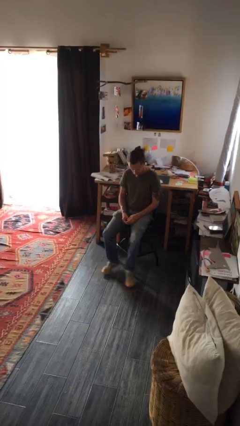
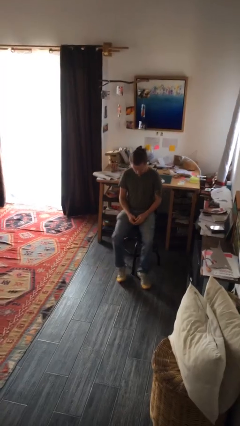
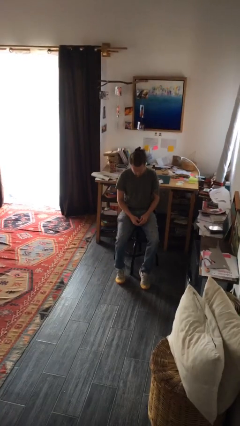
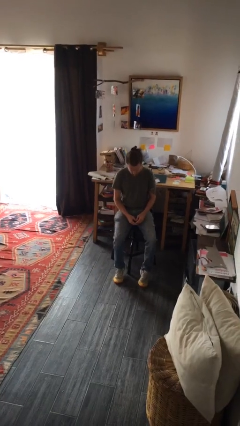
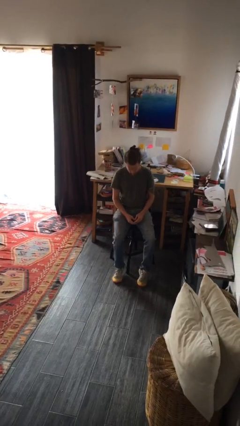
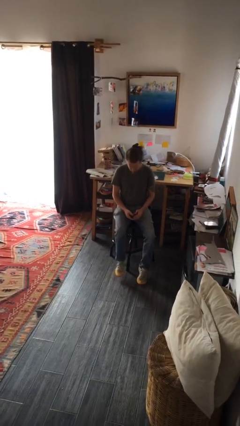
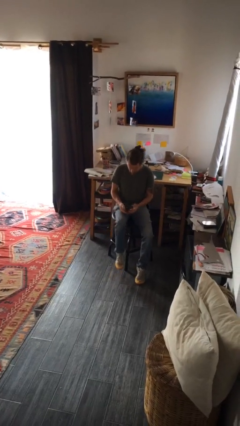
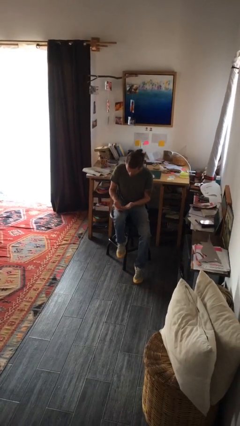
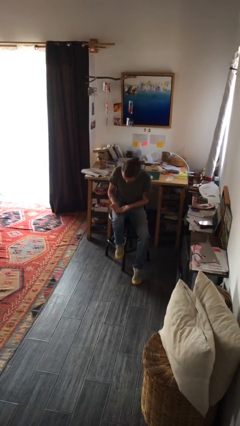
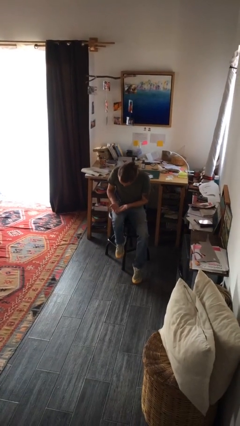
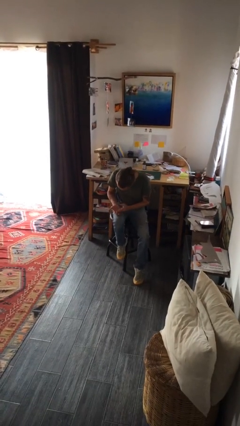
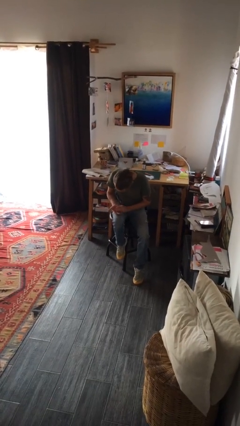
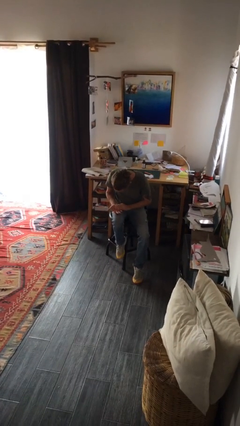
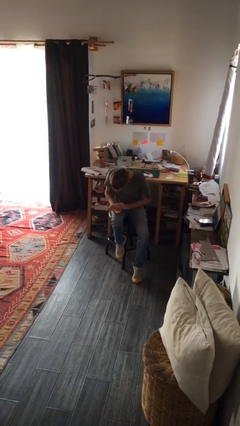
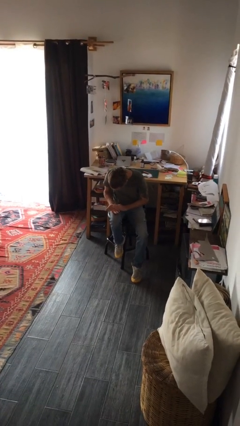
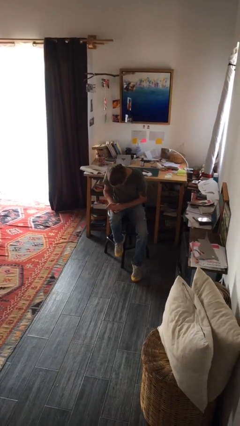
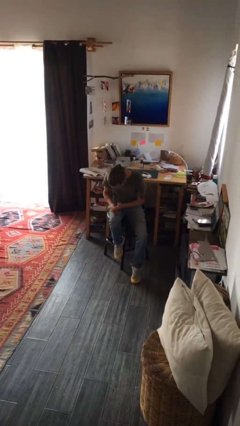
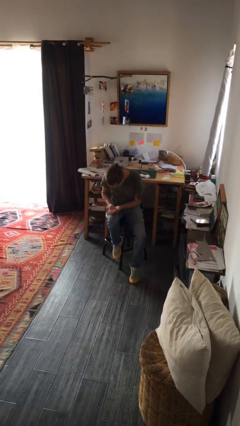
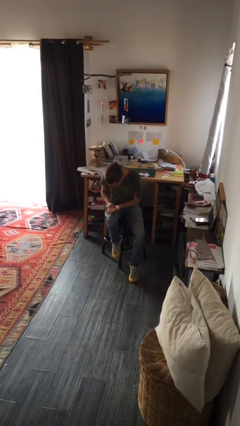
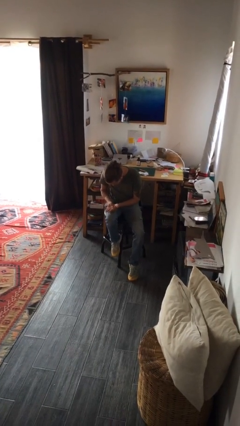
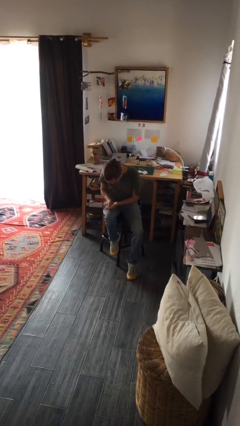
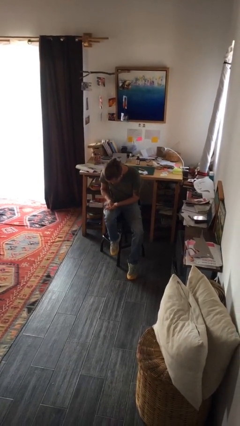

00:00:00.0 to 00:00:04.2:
person looks at hands in lap

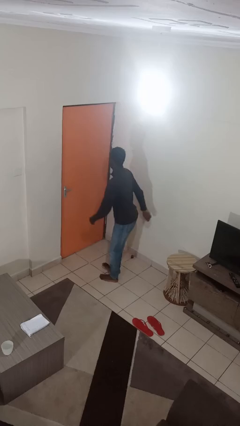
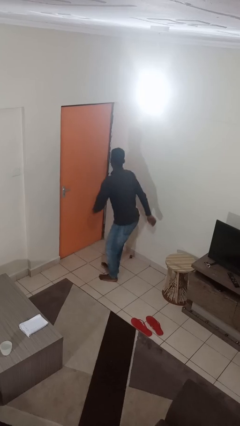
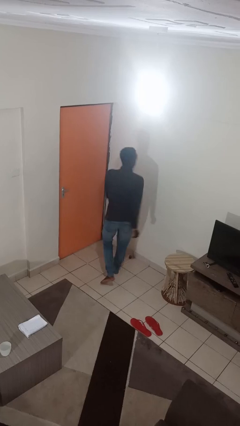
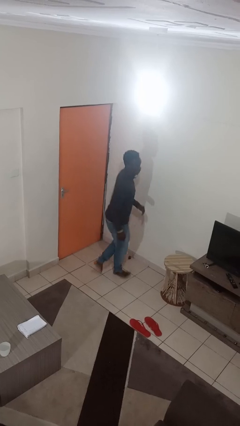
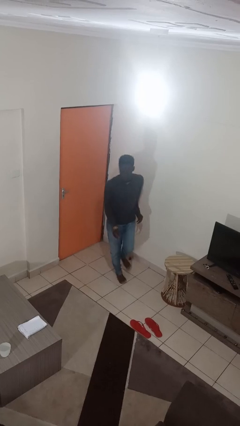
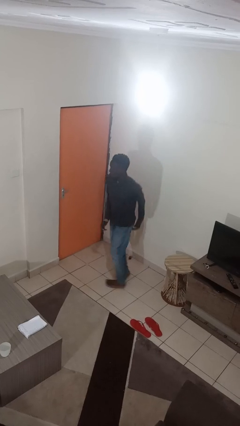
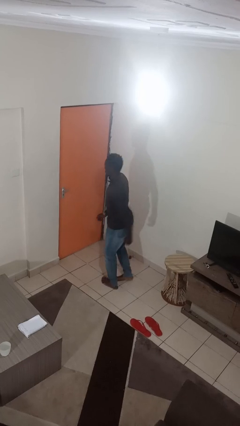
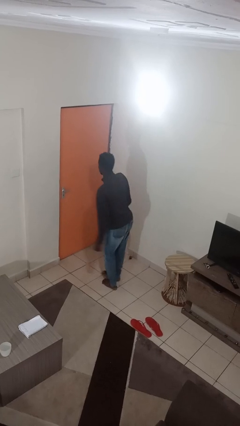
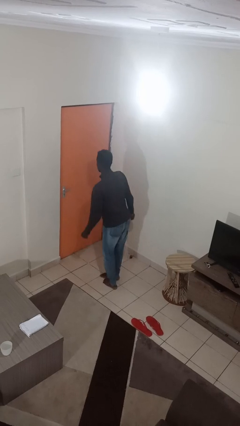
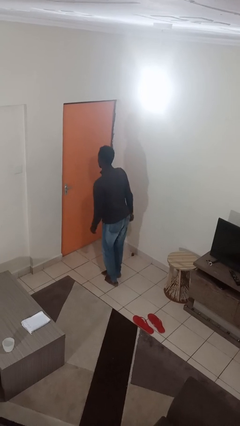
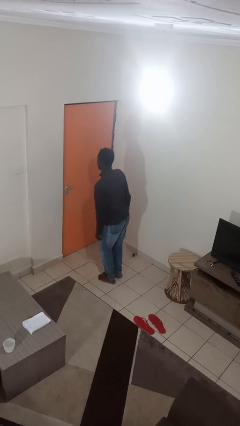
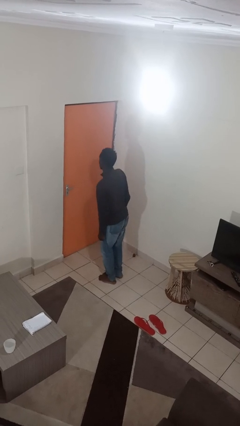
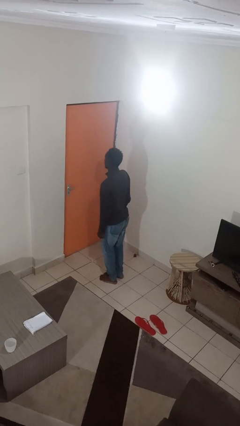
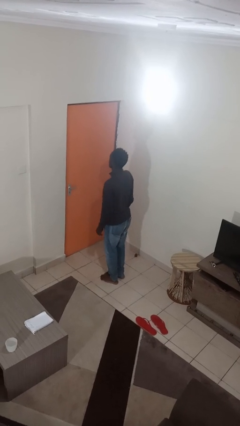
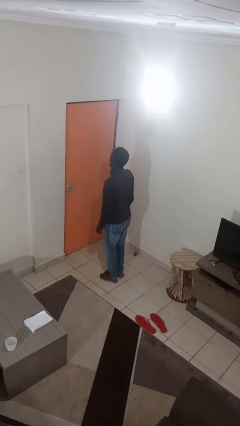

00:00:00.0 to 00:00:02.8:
person twirls

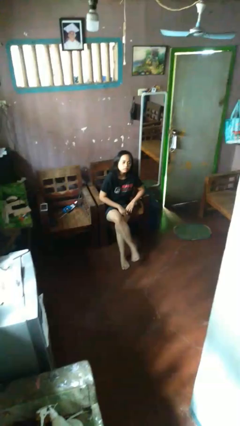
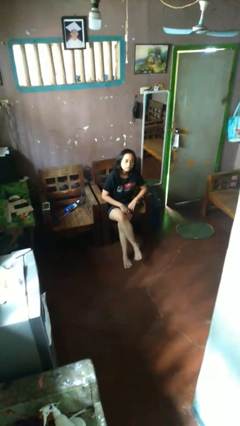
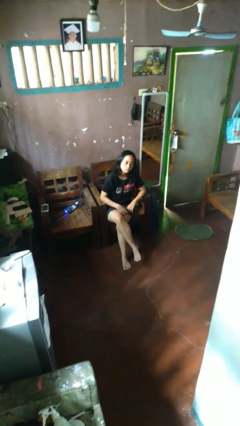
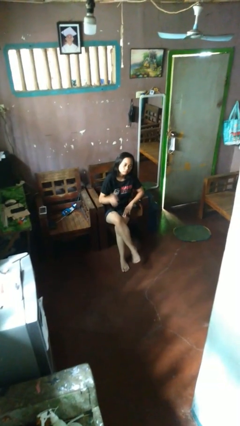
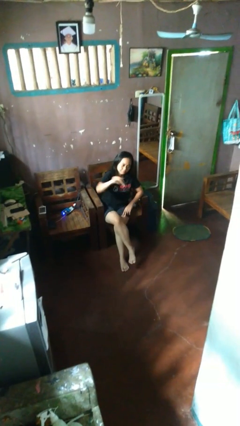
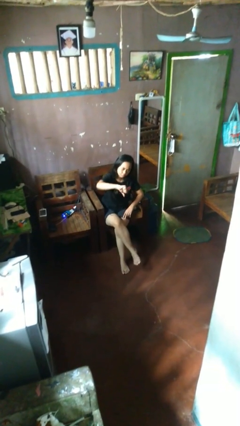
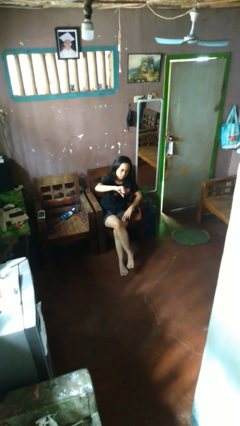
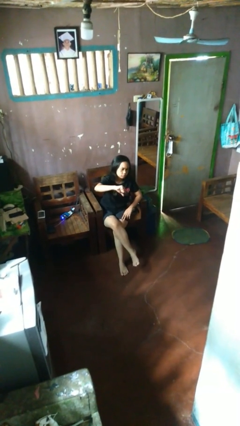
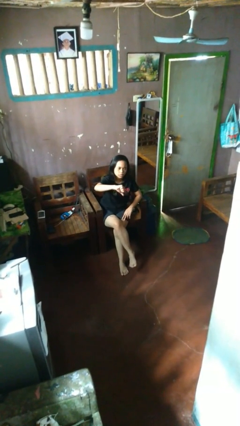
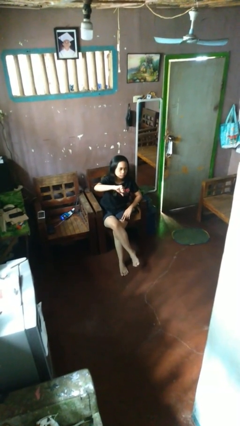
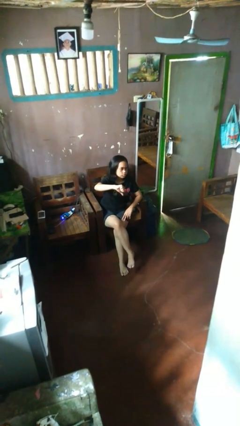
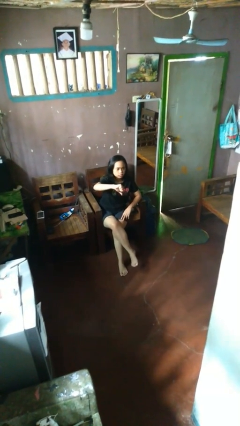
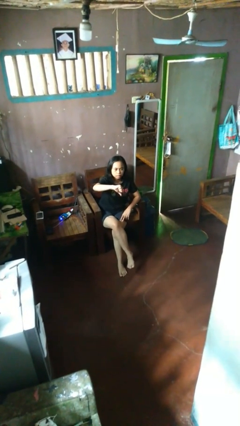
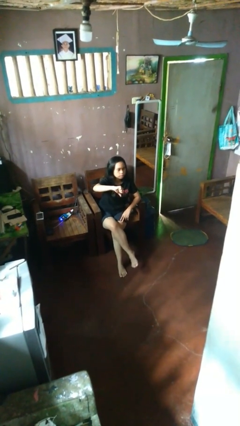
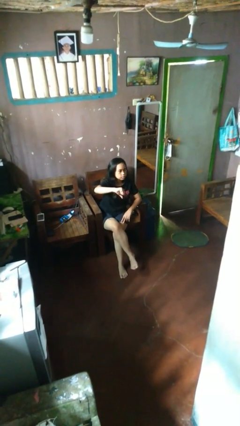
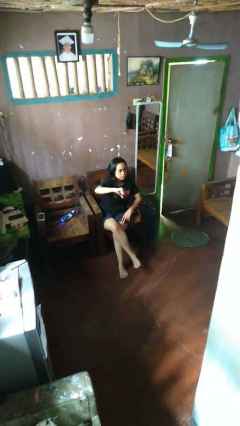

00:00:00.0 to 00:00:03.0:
person gestures thumbs down

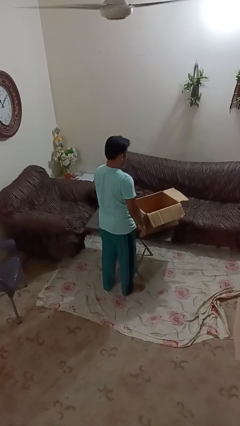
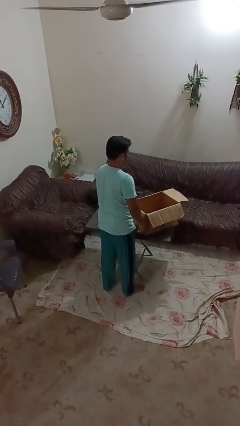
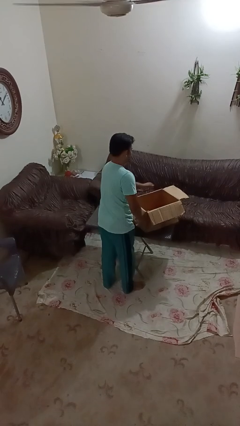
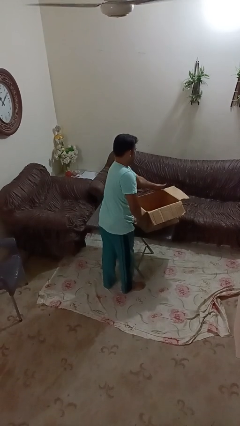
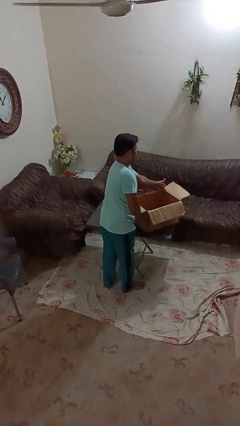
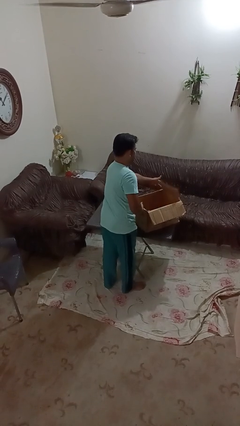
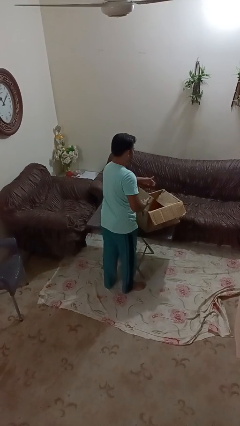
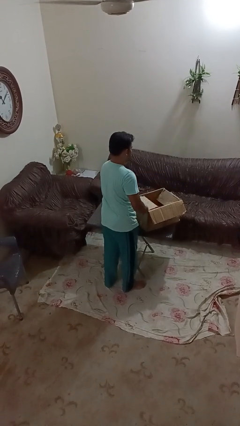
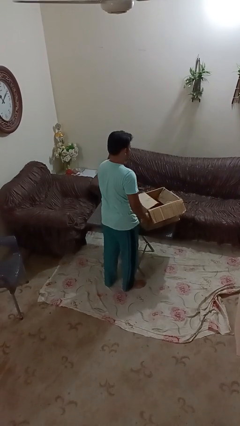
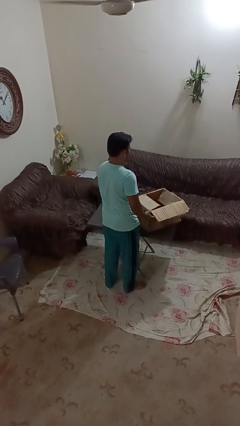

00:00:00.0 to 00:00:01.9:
person closes box

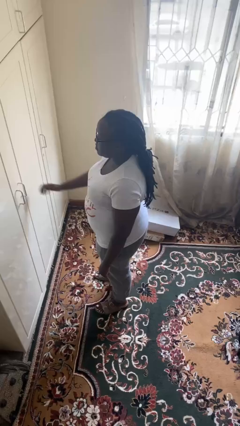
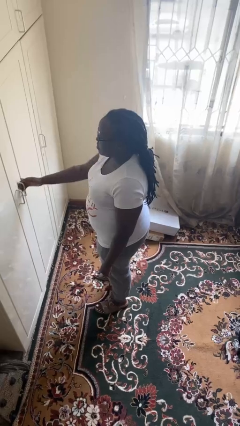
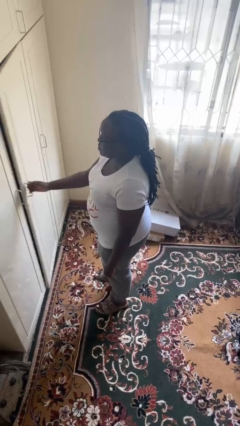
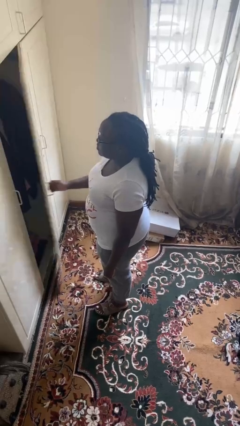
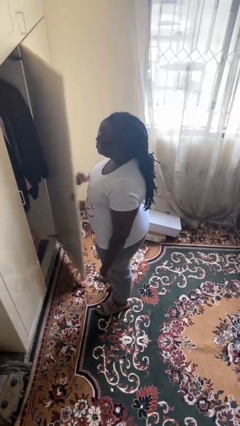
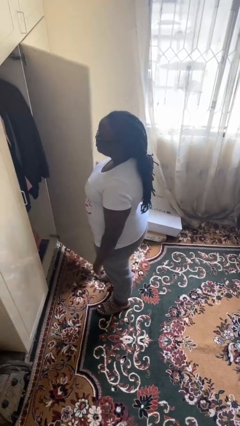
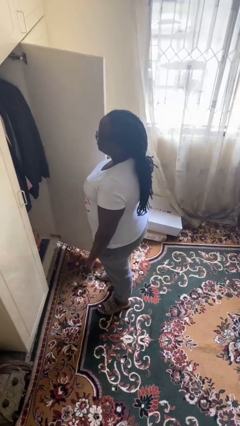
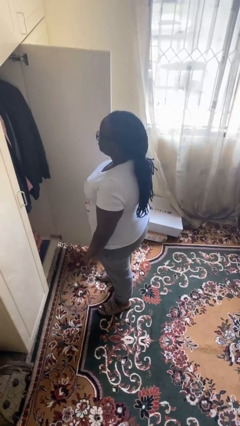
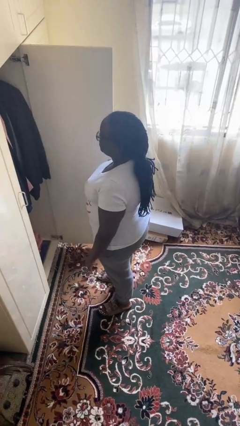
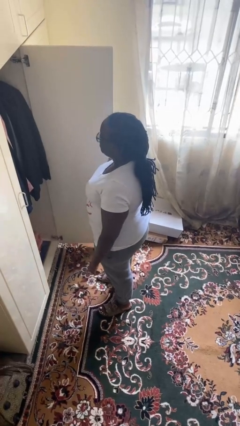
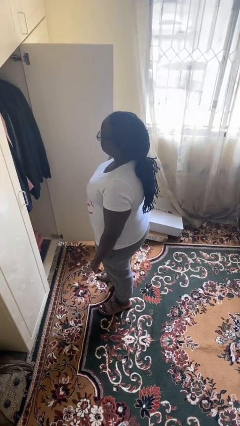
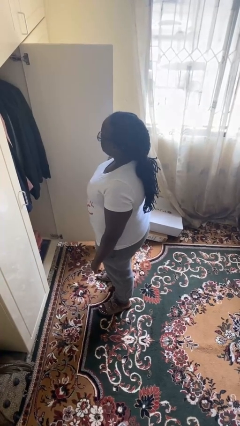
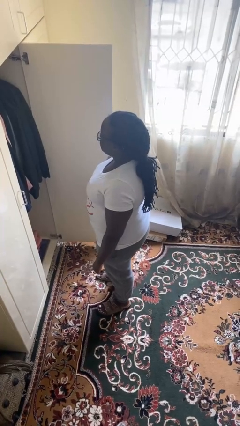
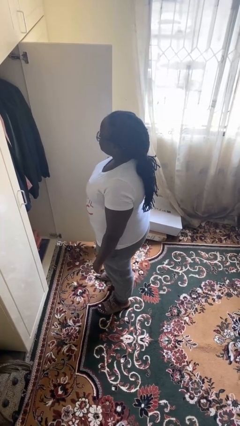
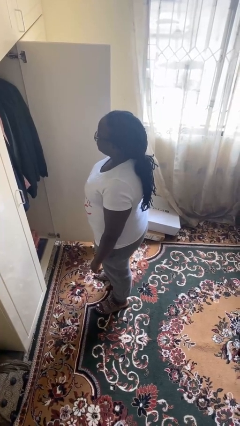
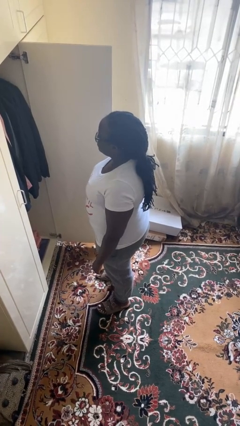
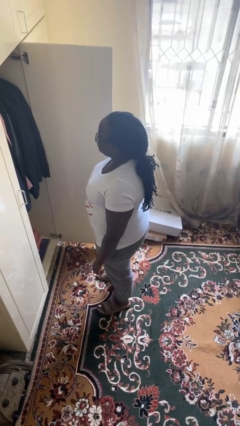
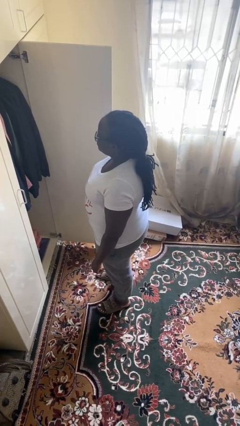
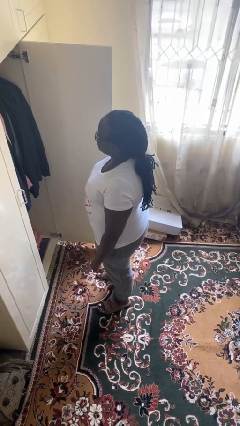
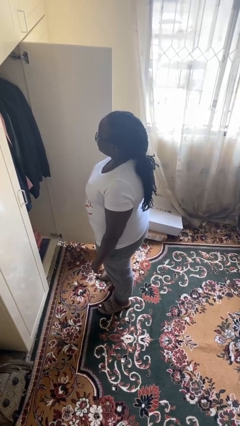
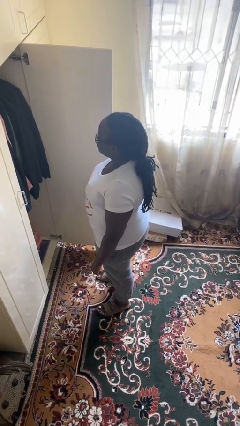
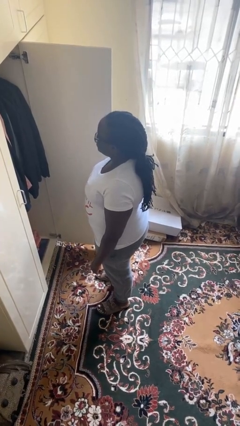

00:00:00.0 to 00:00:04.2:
person opens closet door

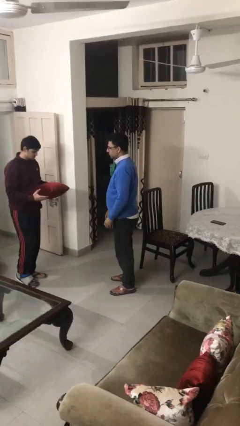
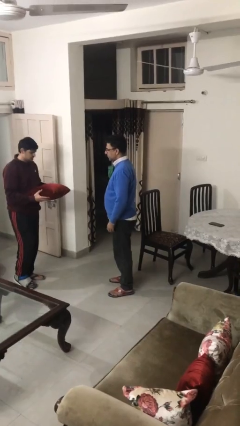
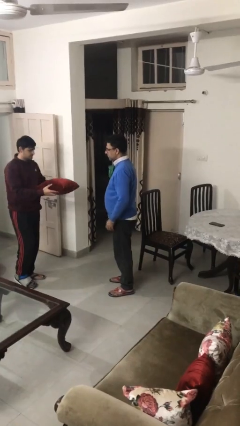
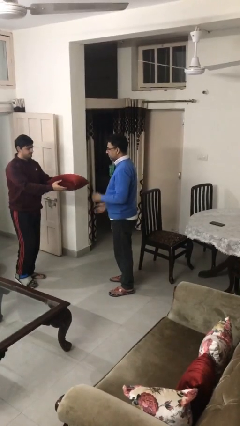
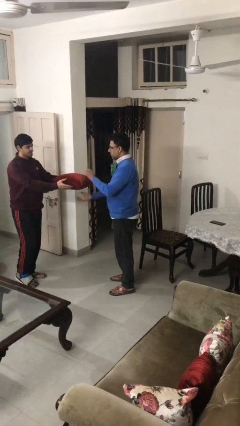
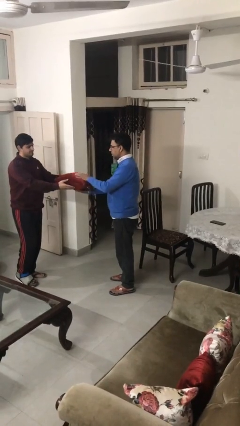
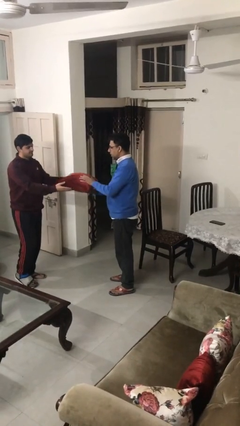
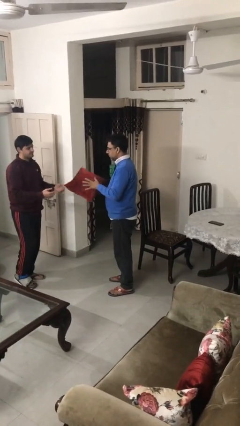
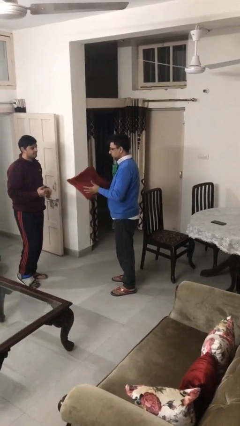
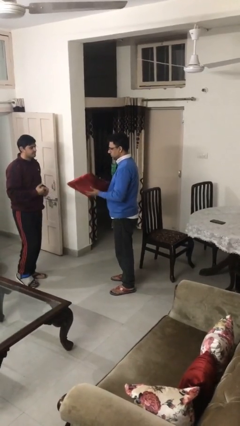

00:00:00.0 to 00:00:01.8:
person transfers object to person
